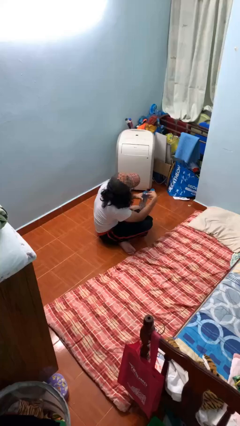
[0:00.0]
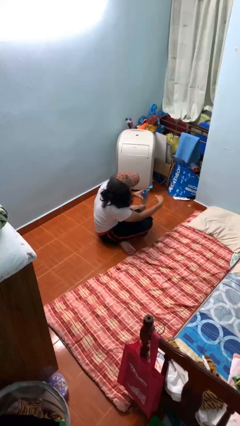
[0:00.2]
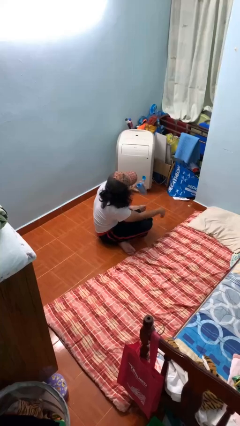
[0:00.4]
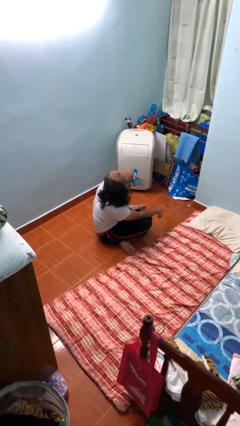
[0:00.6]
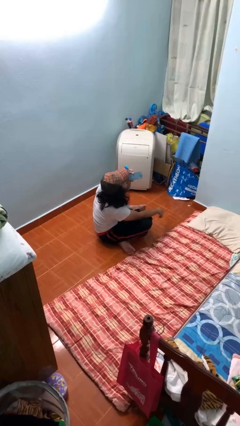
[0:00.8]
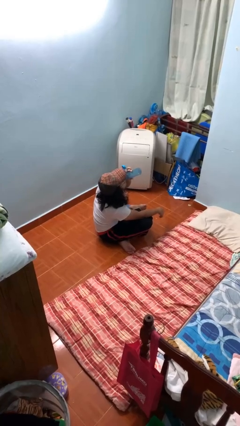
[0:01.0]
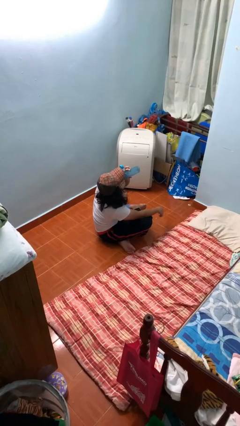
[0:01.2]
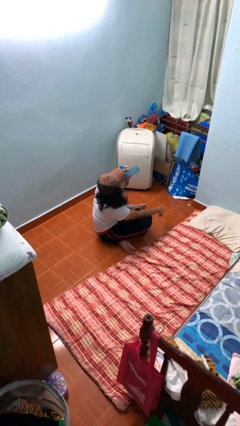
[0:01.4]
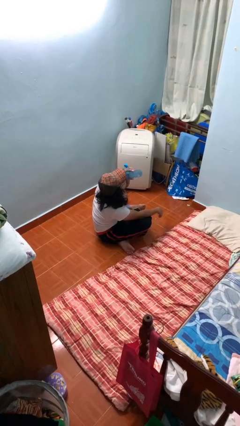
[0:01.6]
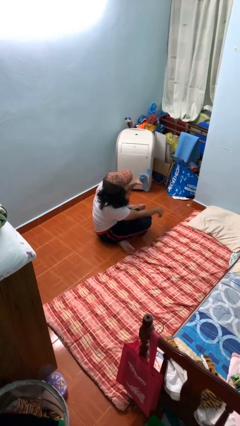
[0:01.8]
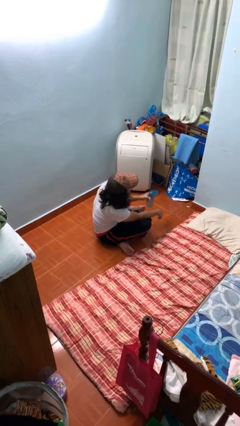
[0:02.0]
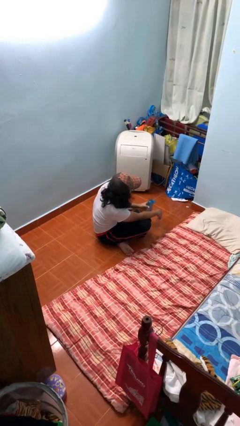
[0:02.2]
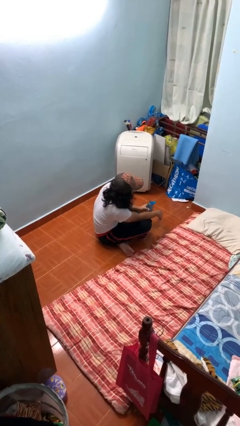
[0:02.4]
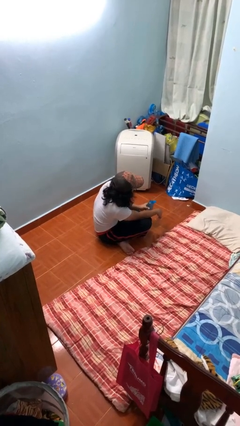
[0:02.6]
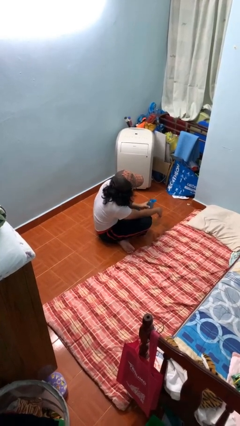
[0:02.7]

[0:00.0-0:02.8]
person drinks from bottle

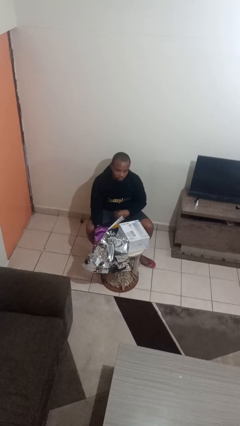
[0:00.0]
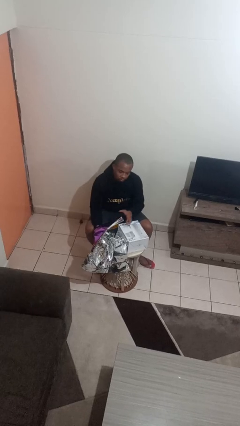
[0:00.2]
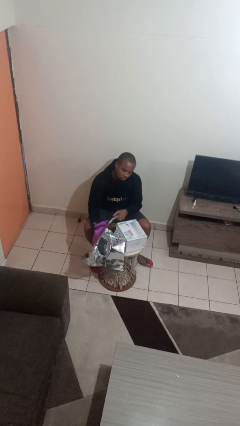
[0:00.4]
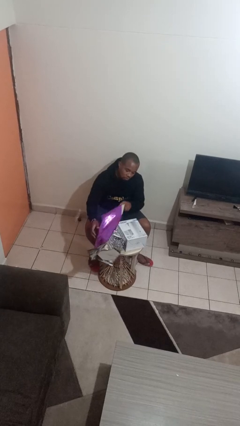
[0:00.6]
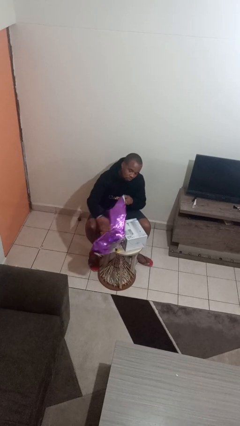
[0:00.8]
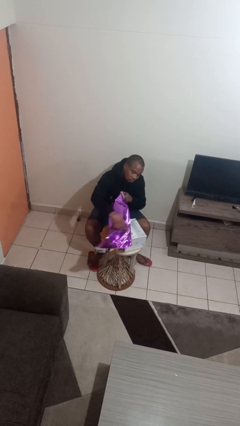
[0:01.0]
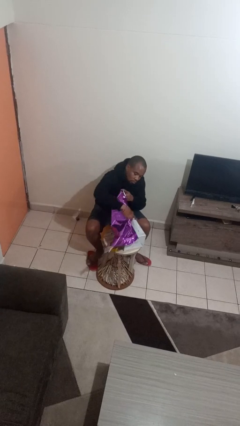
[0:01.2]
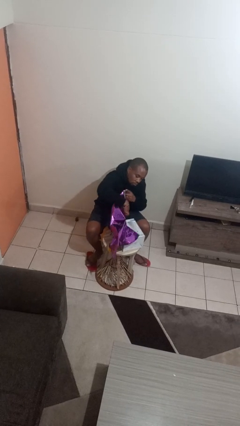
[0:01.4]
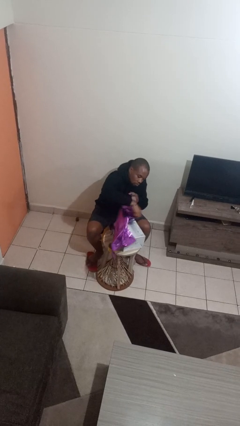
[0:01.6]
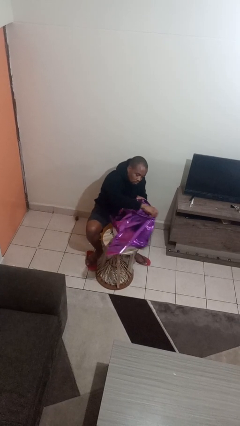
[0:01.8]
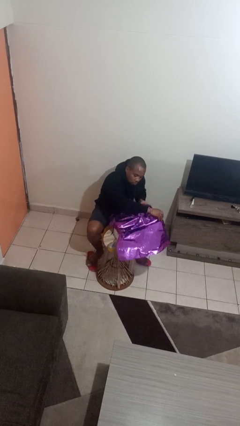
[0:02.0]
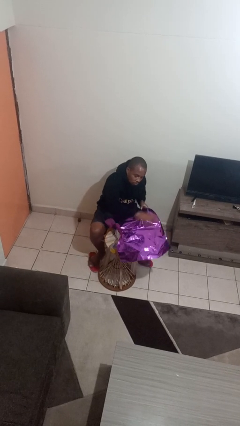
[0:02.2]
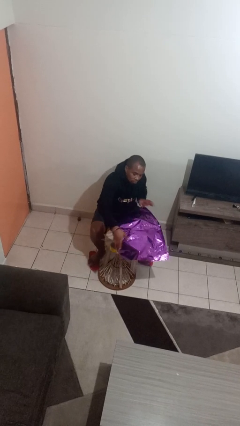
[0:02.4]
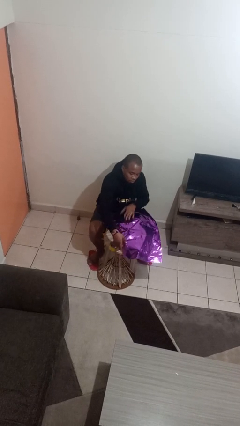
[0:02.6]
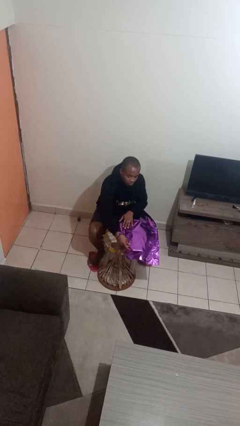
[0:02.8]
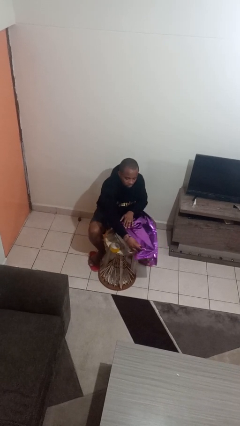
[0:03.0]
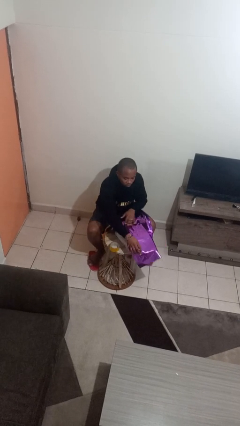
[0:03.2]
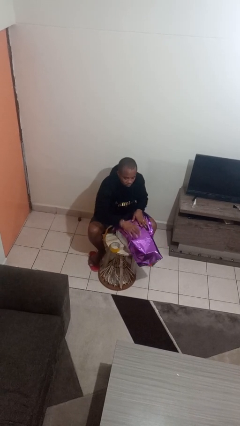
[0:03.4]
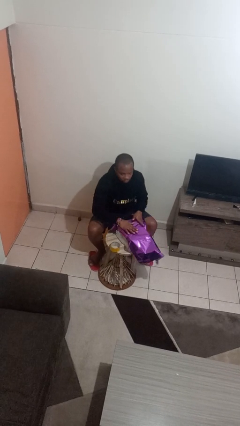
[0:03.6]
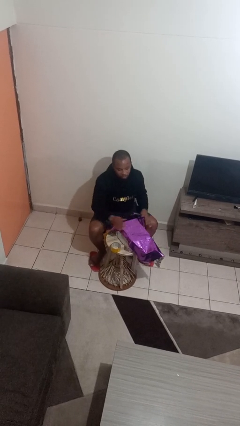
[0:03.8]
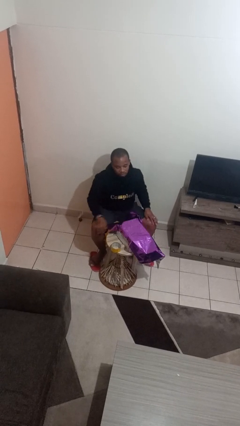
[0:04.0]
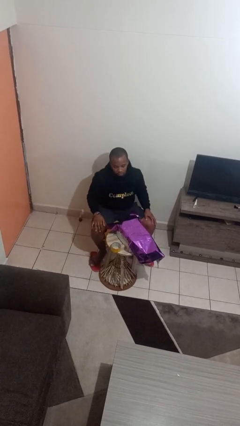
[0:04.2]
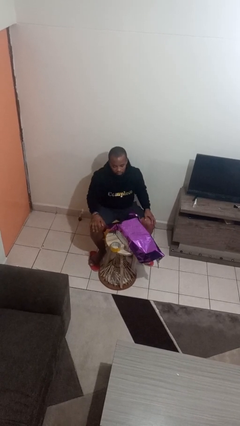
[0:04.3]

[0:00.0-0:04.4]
person wraps box

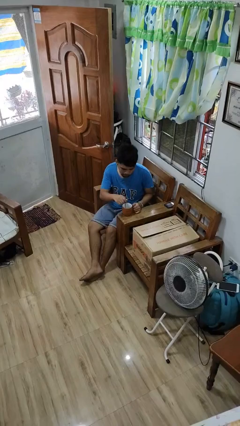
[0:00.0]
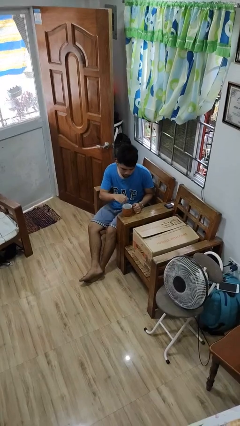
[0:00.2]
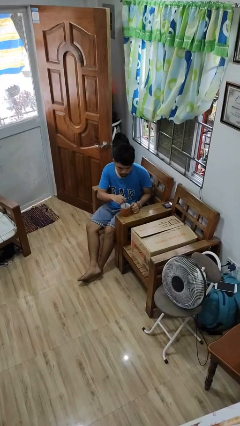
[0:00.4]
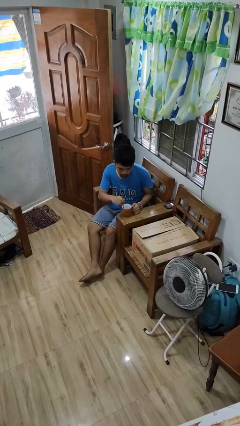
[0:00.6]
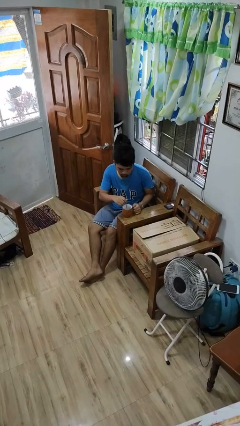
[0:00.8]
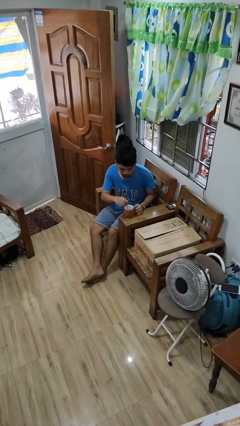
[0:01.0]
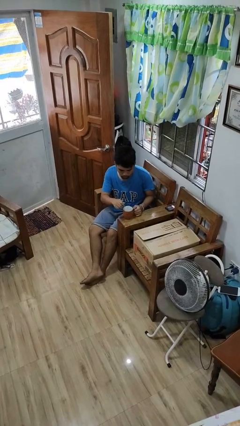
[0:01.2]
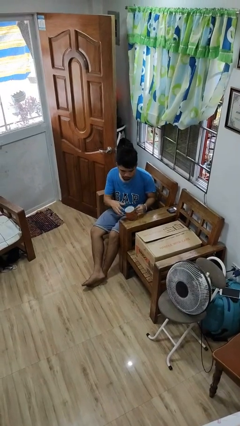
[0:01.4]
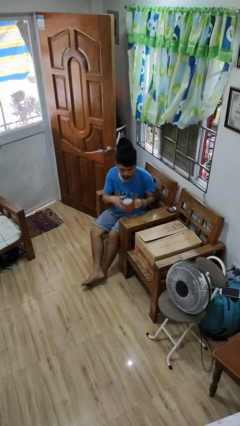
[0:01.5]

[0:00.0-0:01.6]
person stirs mug

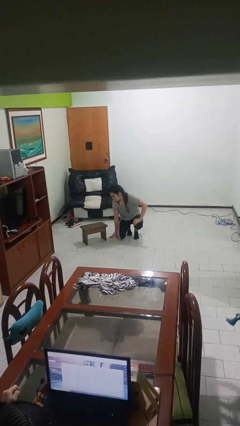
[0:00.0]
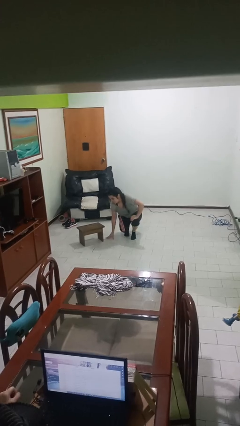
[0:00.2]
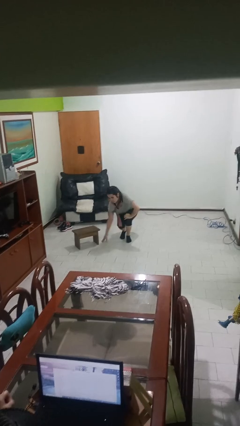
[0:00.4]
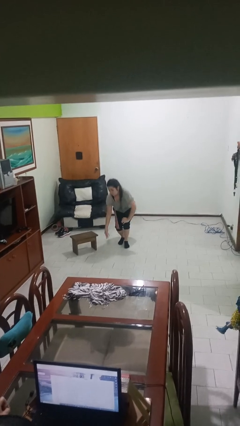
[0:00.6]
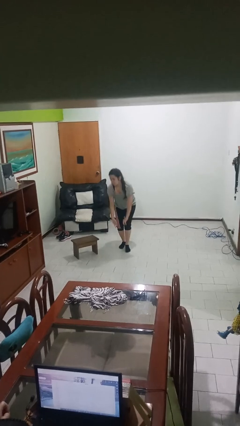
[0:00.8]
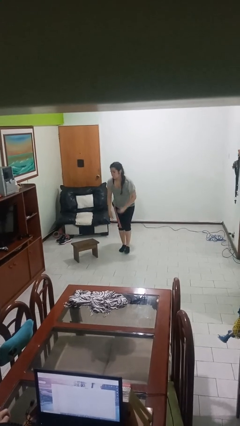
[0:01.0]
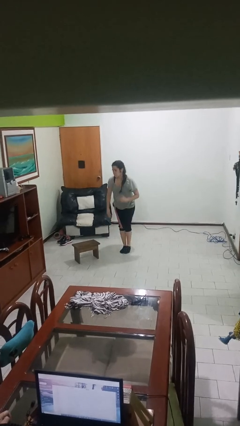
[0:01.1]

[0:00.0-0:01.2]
person stands up from floor

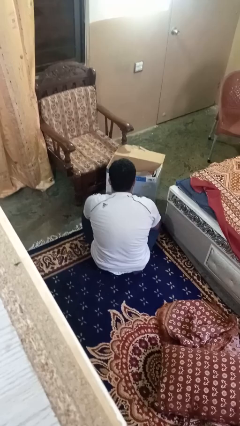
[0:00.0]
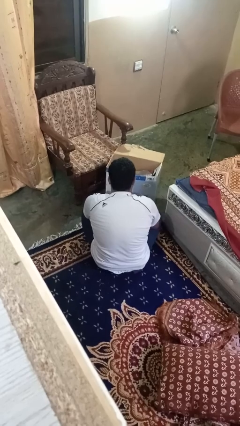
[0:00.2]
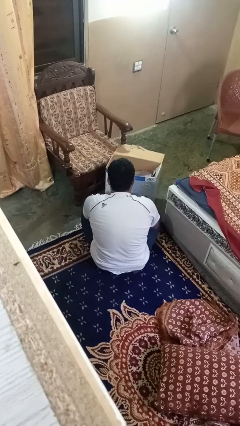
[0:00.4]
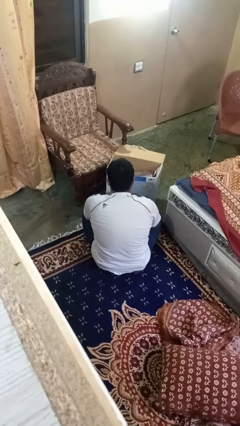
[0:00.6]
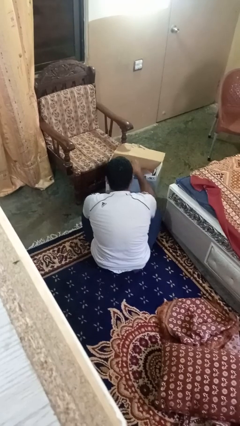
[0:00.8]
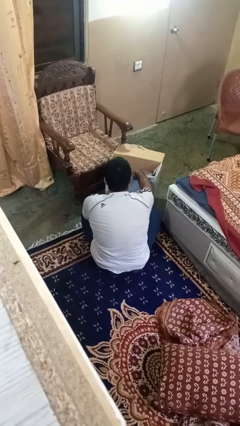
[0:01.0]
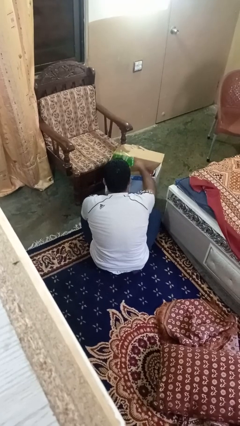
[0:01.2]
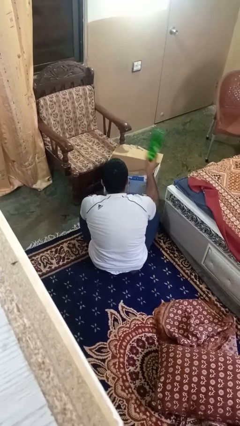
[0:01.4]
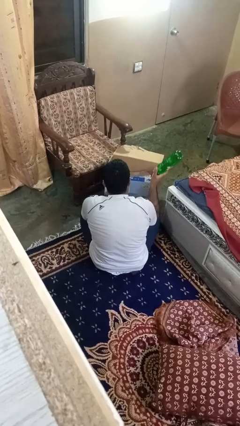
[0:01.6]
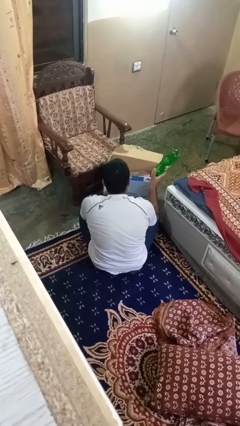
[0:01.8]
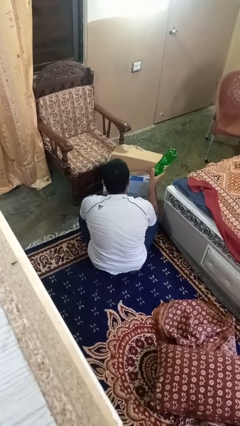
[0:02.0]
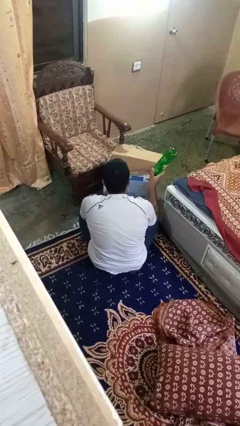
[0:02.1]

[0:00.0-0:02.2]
person takes object from box

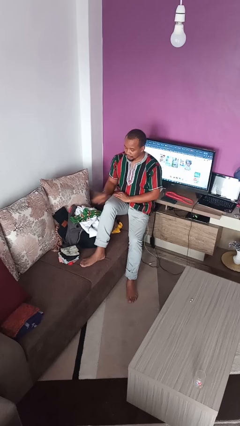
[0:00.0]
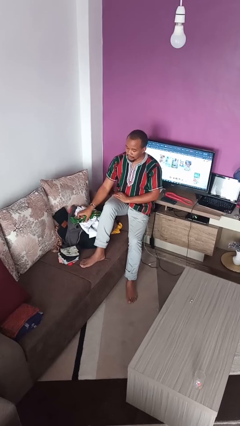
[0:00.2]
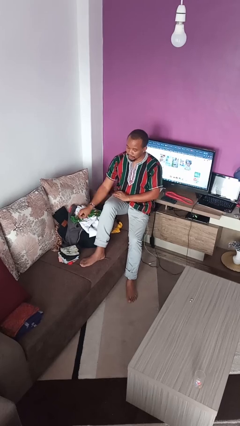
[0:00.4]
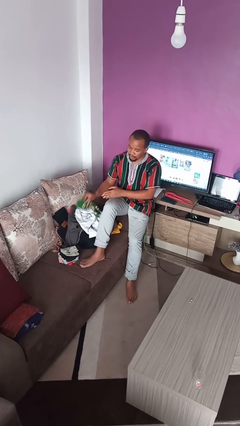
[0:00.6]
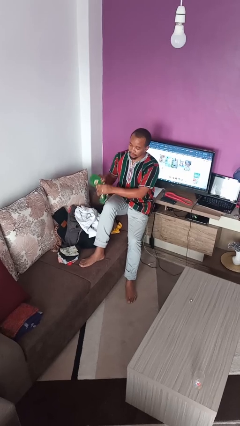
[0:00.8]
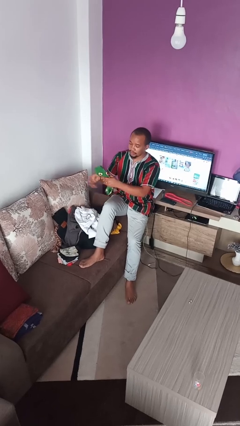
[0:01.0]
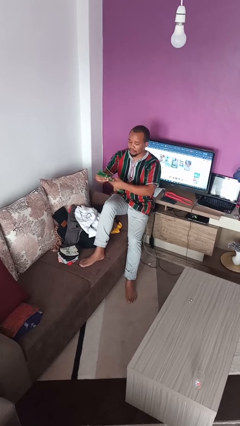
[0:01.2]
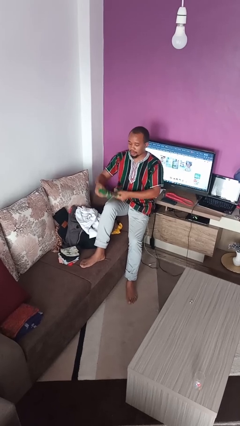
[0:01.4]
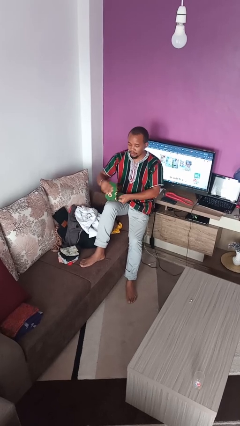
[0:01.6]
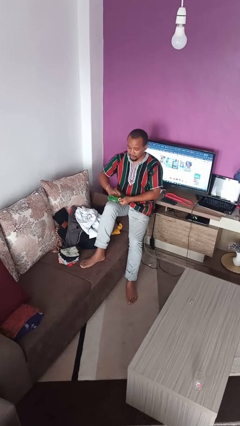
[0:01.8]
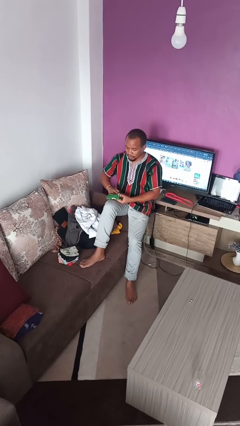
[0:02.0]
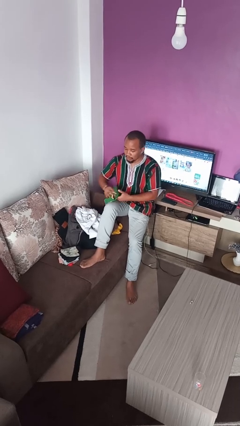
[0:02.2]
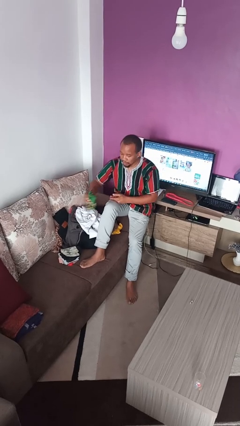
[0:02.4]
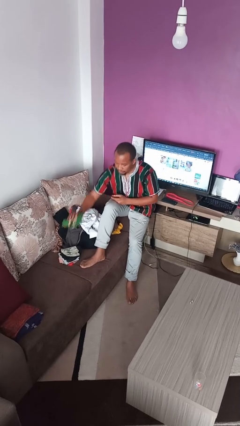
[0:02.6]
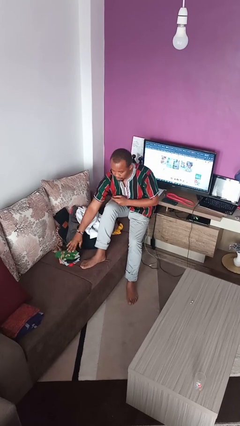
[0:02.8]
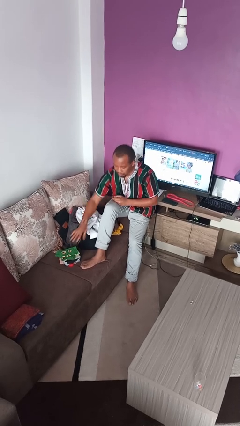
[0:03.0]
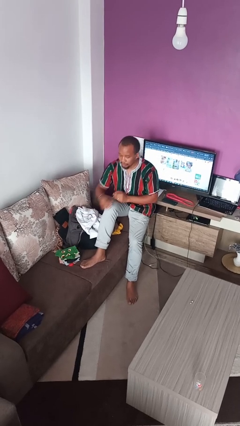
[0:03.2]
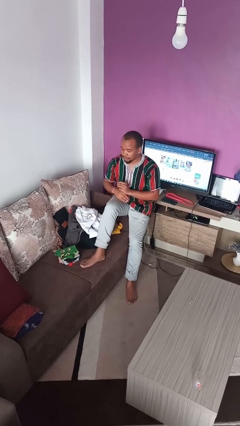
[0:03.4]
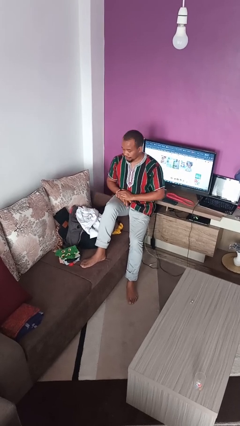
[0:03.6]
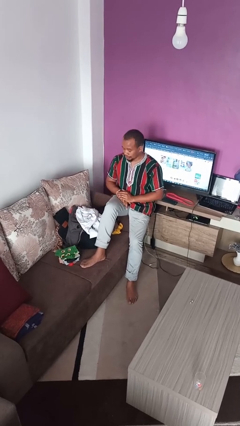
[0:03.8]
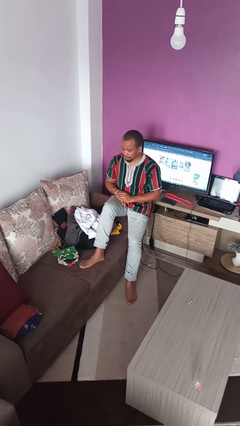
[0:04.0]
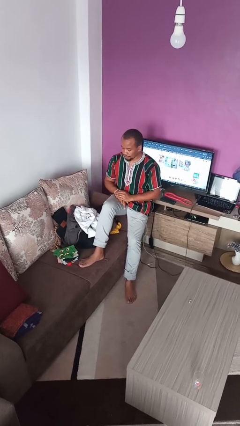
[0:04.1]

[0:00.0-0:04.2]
person folds socks

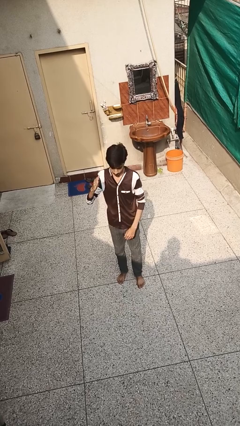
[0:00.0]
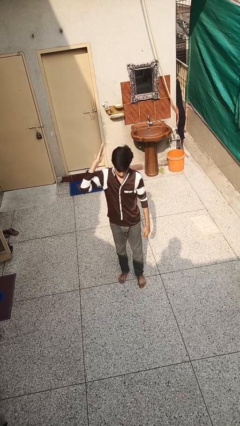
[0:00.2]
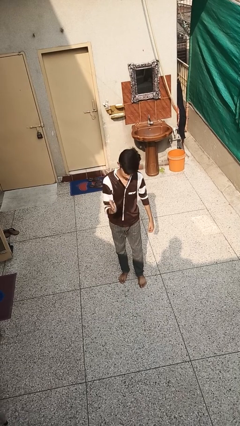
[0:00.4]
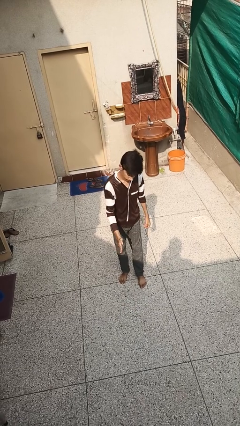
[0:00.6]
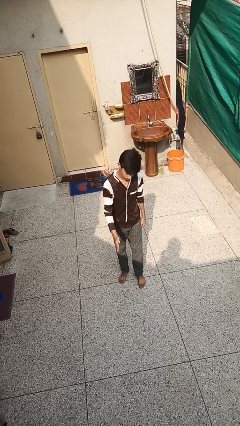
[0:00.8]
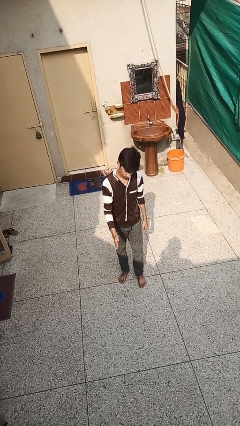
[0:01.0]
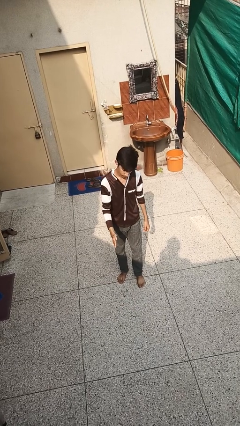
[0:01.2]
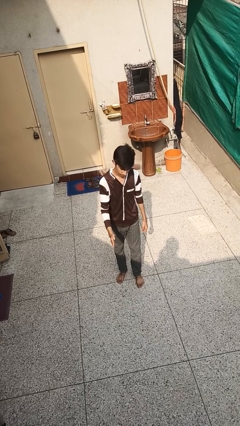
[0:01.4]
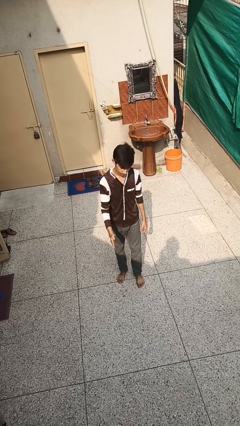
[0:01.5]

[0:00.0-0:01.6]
person karate chop
